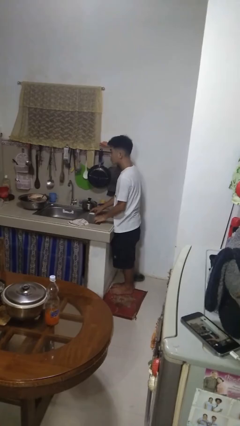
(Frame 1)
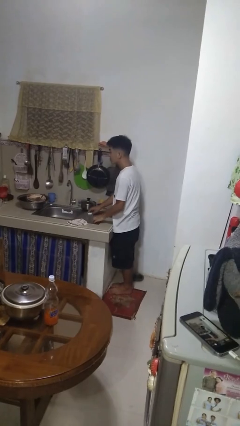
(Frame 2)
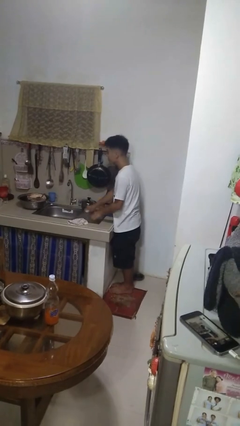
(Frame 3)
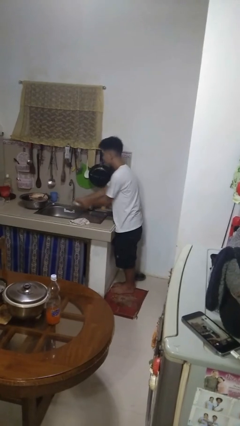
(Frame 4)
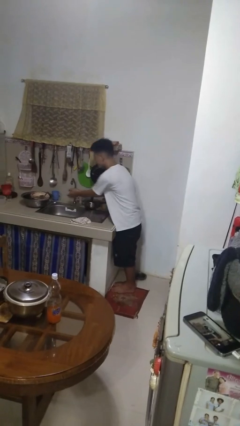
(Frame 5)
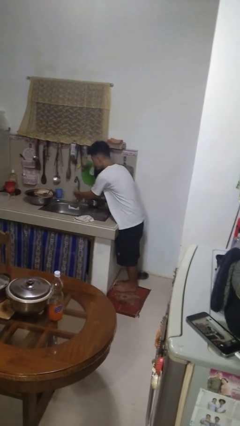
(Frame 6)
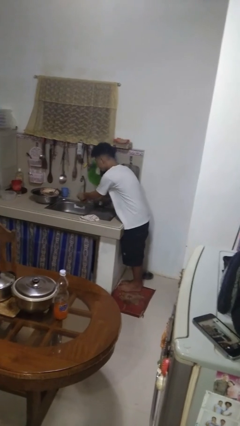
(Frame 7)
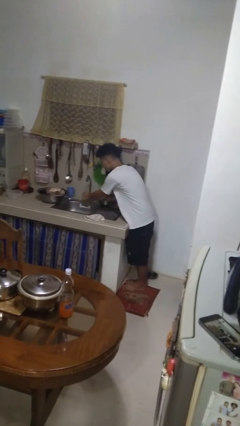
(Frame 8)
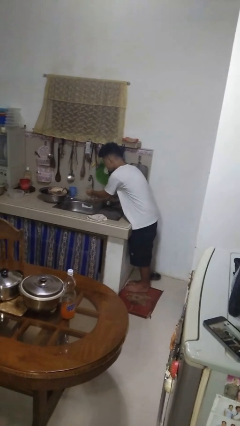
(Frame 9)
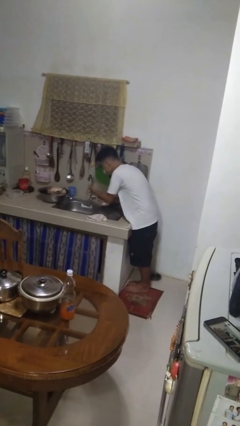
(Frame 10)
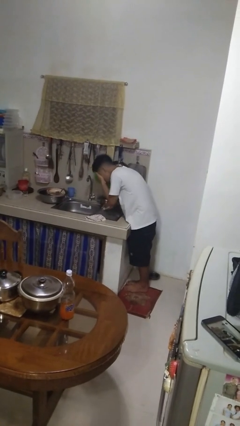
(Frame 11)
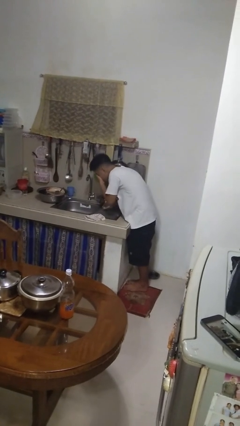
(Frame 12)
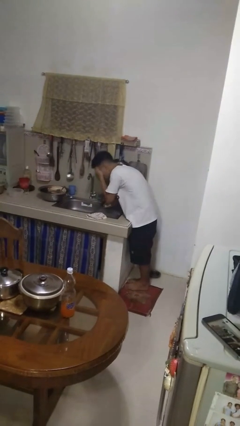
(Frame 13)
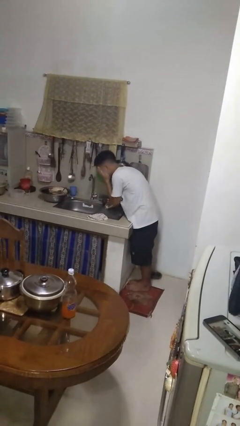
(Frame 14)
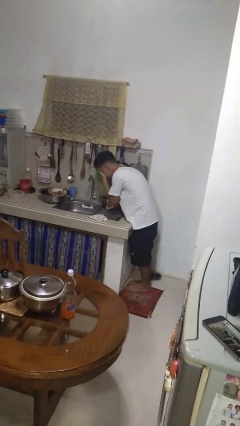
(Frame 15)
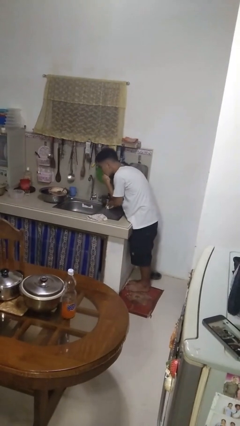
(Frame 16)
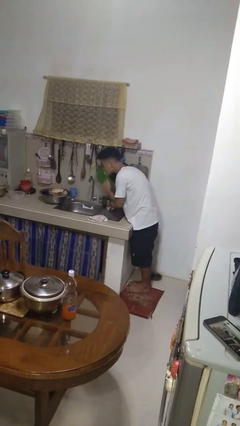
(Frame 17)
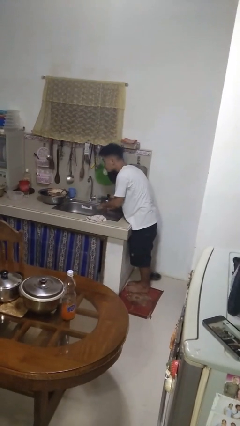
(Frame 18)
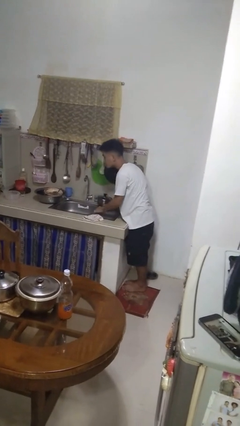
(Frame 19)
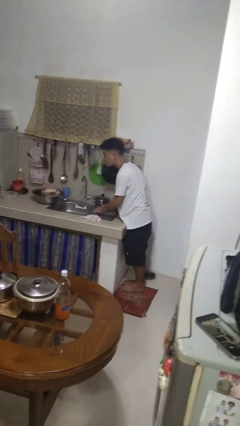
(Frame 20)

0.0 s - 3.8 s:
person washes face

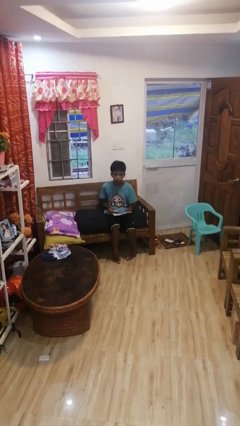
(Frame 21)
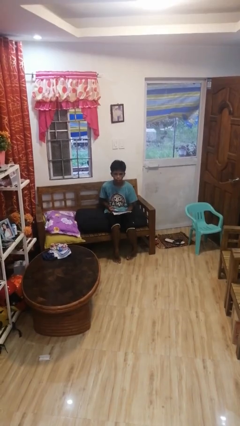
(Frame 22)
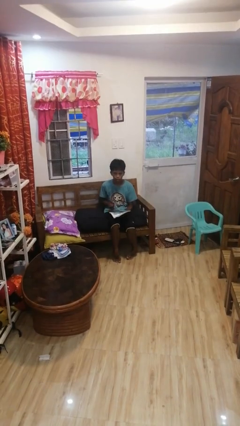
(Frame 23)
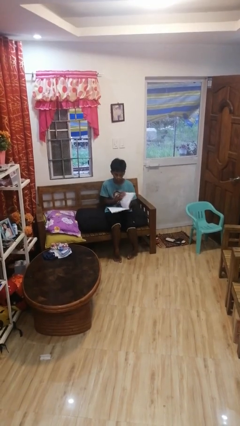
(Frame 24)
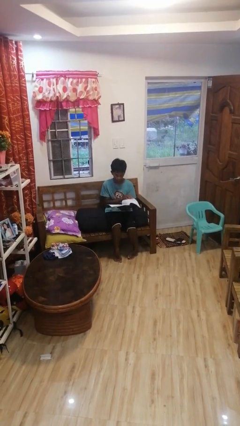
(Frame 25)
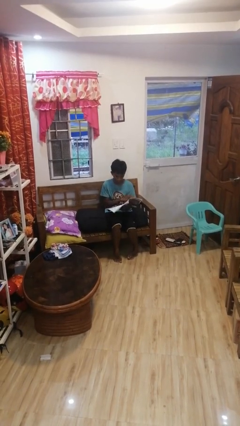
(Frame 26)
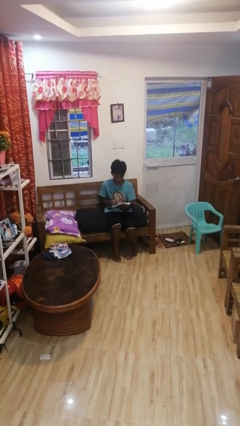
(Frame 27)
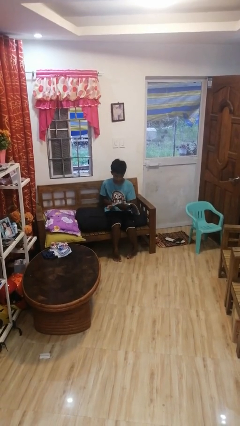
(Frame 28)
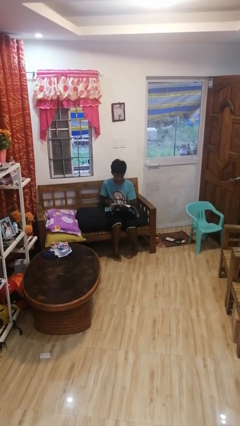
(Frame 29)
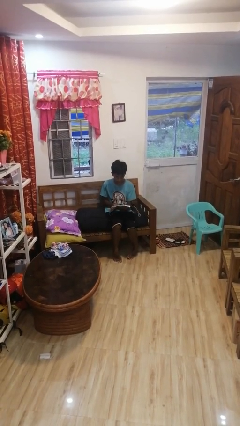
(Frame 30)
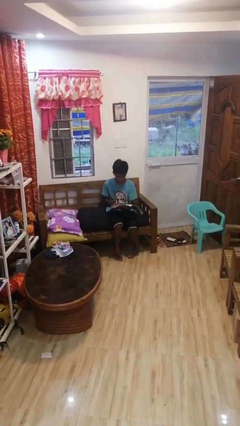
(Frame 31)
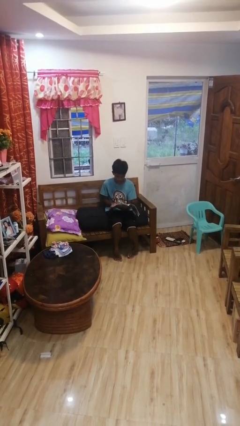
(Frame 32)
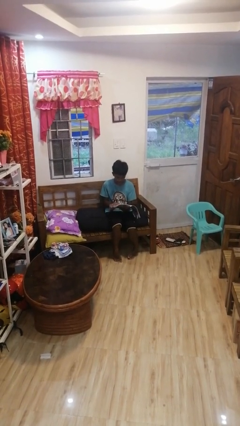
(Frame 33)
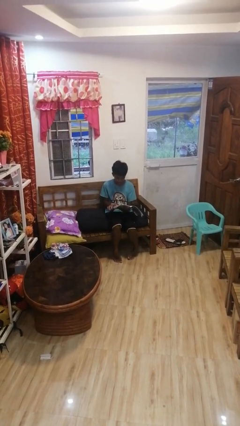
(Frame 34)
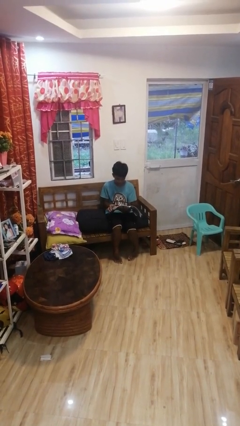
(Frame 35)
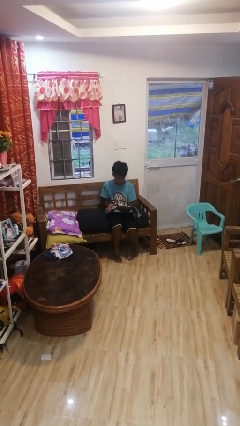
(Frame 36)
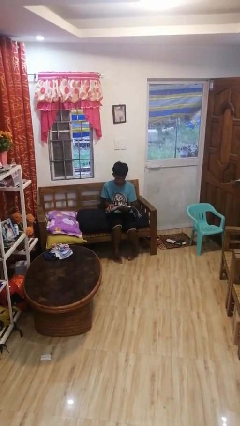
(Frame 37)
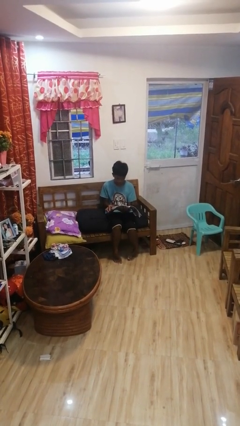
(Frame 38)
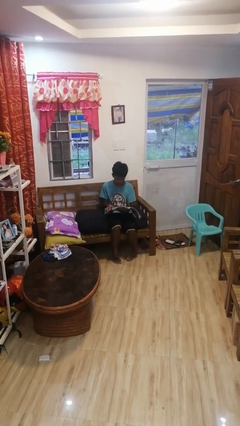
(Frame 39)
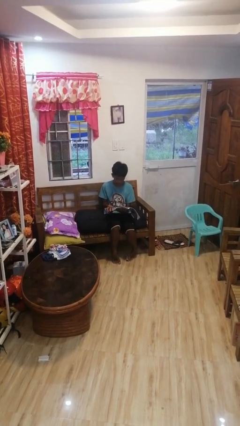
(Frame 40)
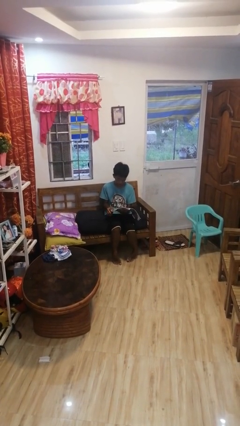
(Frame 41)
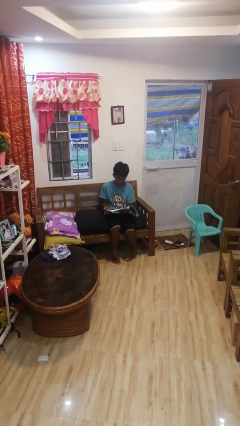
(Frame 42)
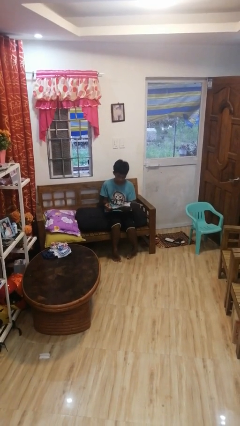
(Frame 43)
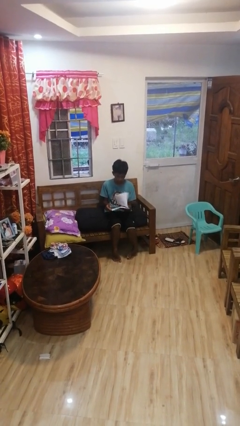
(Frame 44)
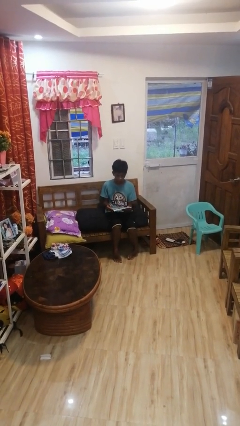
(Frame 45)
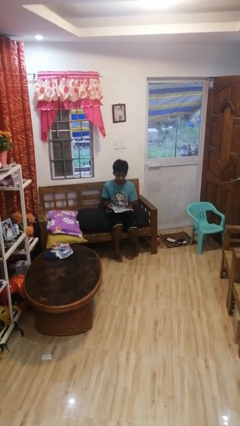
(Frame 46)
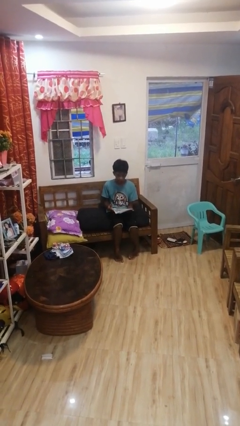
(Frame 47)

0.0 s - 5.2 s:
person reads magazine

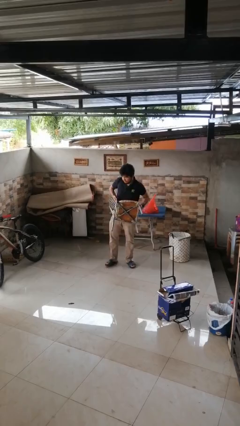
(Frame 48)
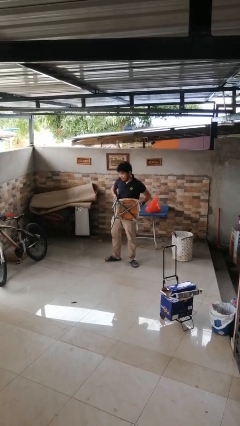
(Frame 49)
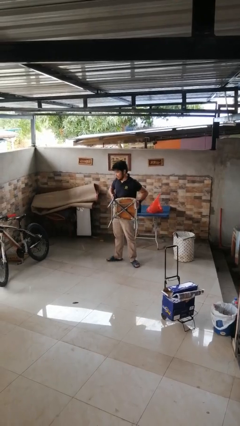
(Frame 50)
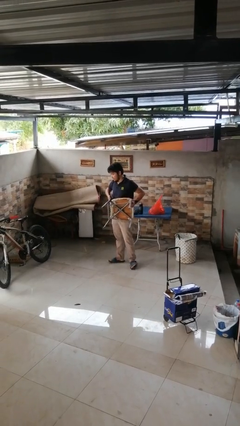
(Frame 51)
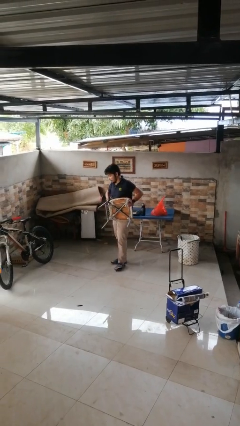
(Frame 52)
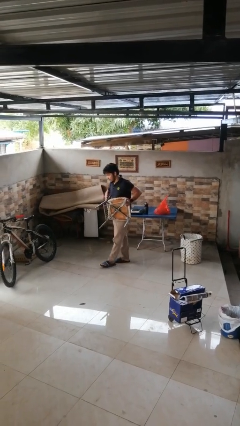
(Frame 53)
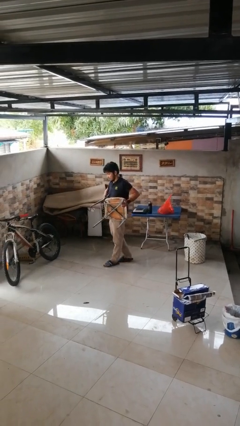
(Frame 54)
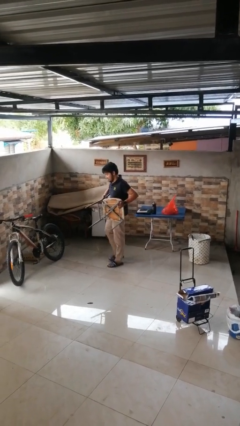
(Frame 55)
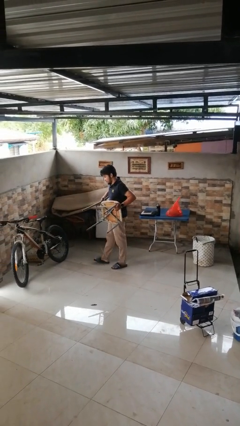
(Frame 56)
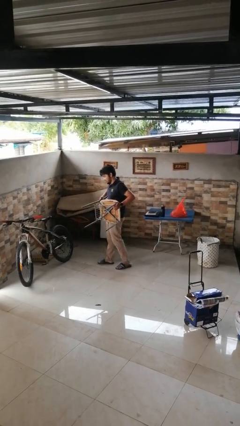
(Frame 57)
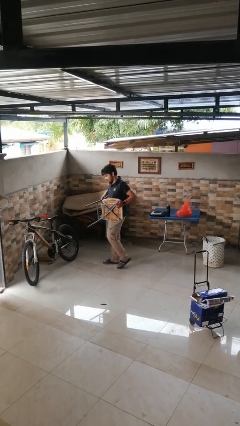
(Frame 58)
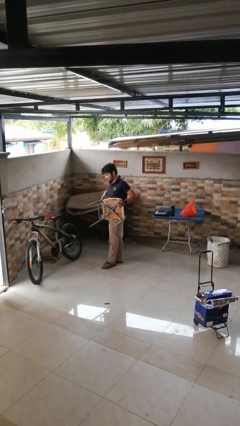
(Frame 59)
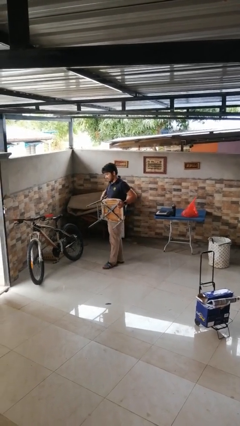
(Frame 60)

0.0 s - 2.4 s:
person carries furniture

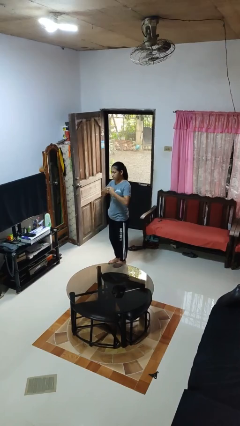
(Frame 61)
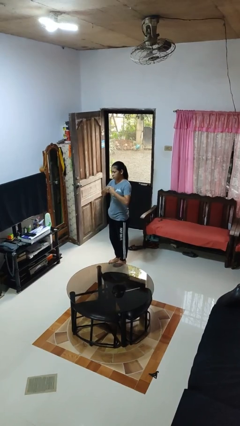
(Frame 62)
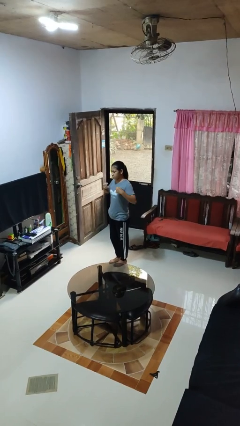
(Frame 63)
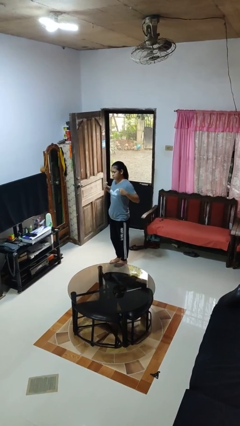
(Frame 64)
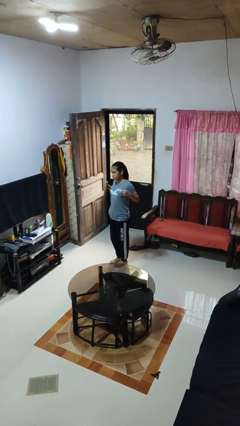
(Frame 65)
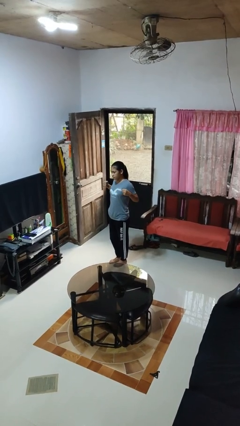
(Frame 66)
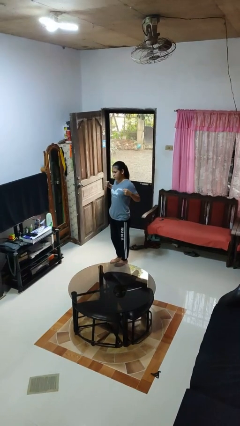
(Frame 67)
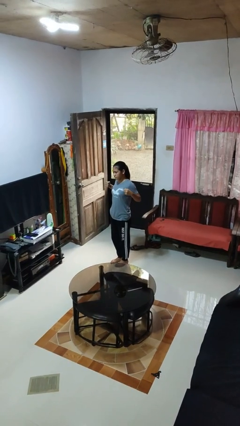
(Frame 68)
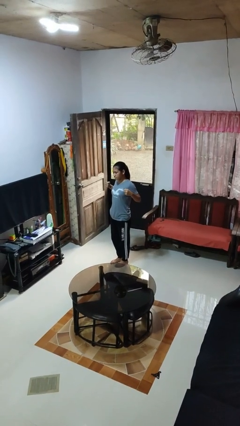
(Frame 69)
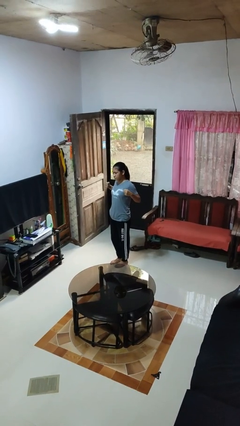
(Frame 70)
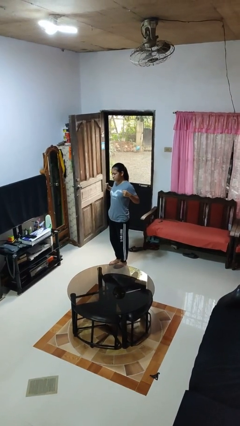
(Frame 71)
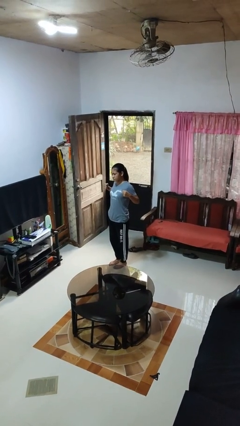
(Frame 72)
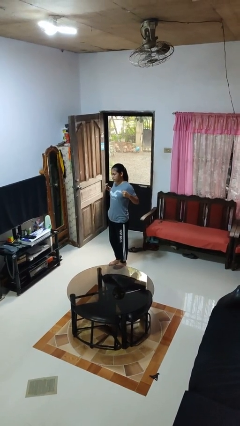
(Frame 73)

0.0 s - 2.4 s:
person gestures zoom in

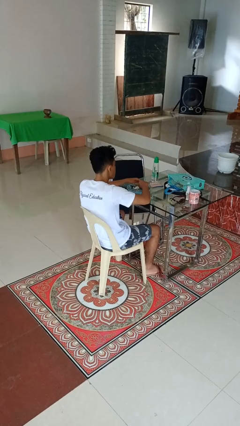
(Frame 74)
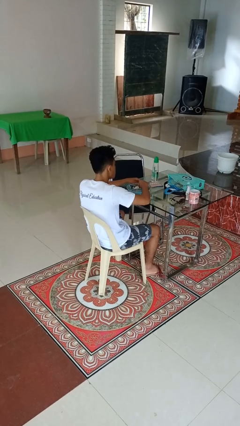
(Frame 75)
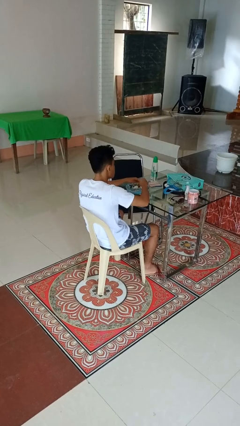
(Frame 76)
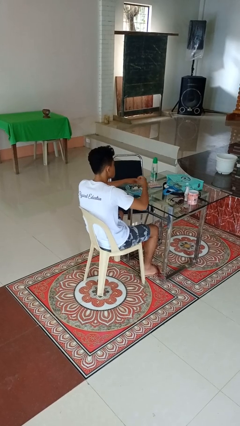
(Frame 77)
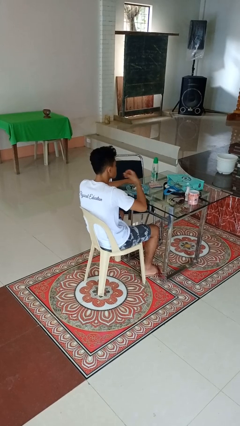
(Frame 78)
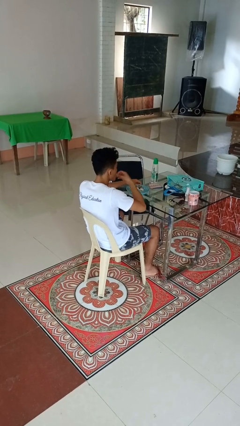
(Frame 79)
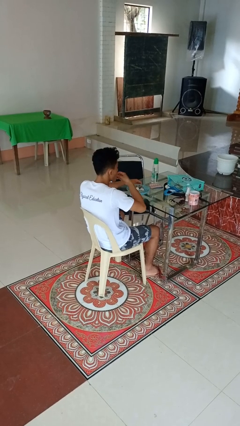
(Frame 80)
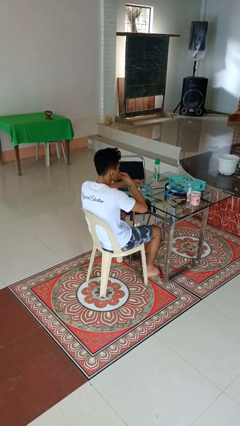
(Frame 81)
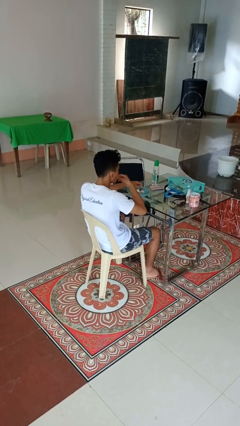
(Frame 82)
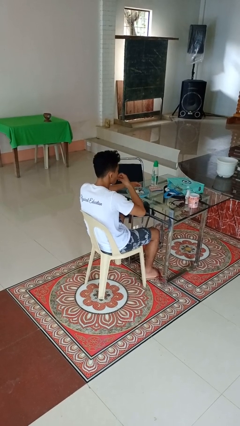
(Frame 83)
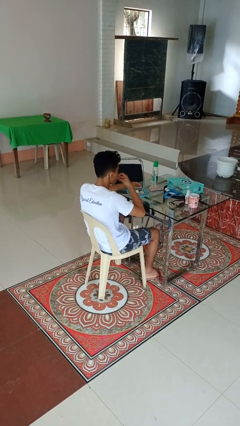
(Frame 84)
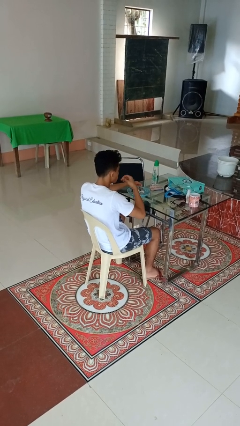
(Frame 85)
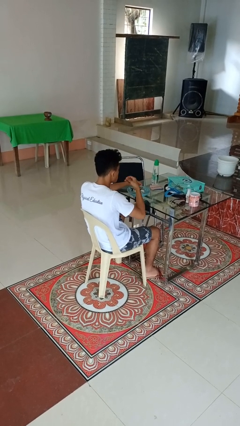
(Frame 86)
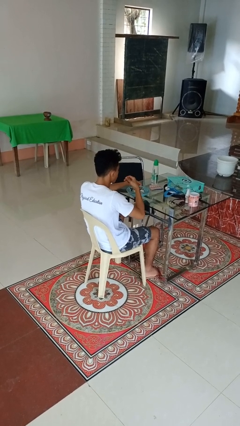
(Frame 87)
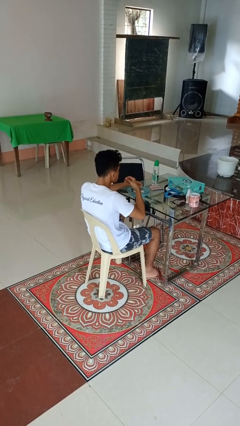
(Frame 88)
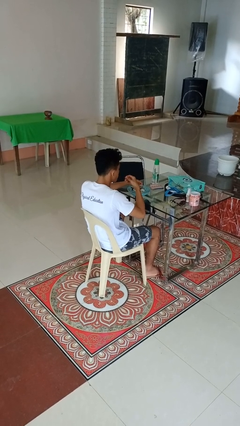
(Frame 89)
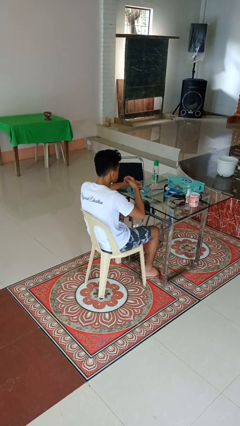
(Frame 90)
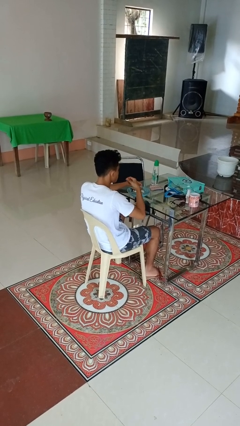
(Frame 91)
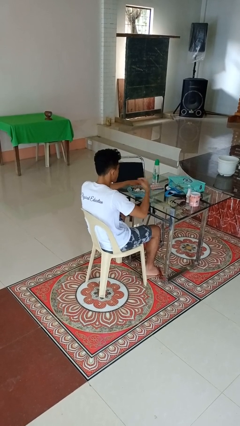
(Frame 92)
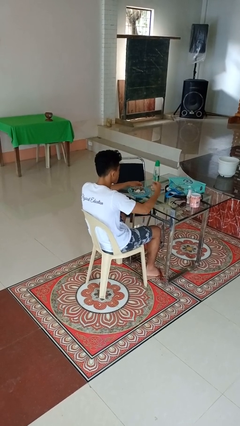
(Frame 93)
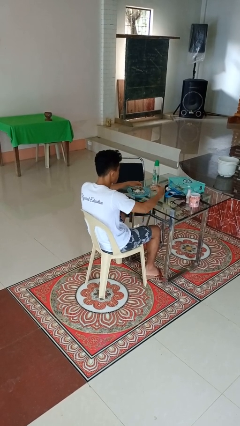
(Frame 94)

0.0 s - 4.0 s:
person eats with hands
